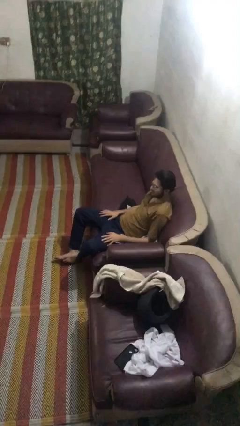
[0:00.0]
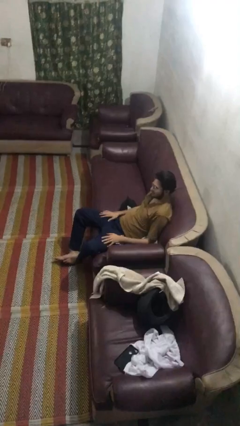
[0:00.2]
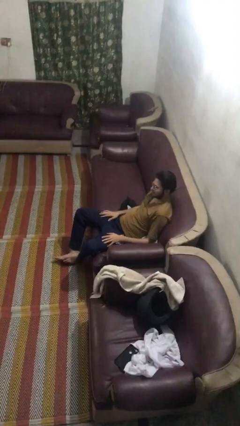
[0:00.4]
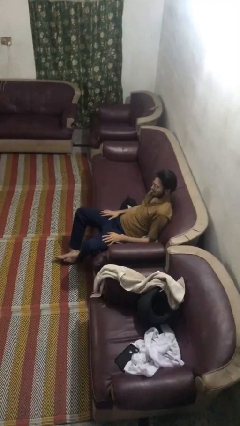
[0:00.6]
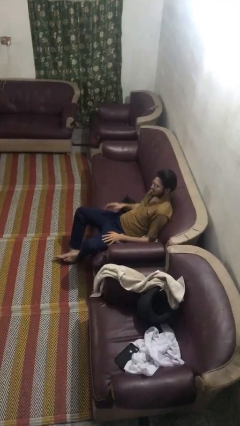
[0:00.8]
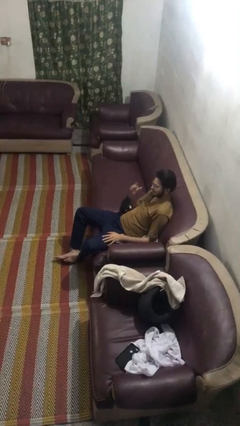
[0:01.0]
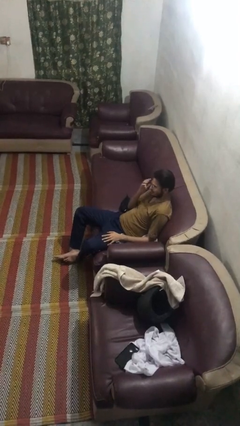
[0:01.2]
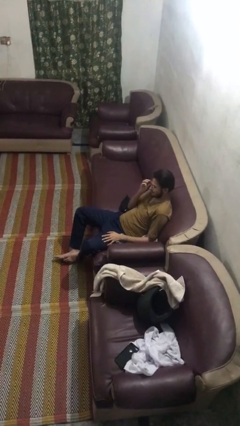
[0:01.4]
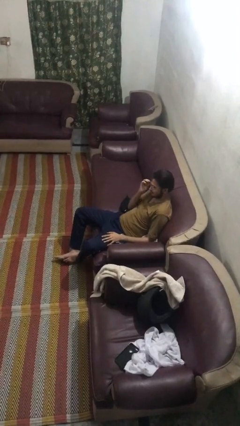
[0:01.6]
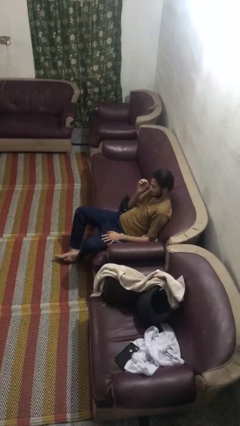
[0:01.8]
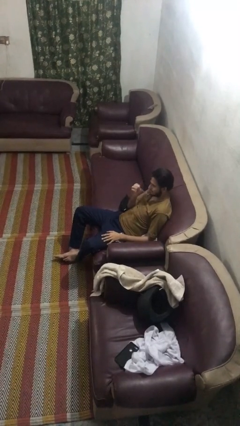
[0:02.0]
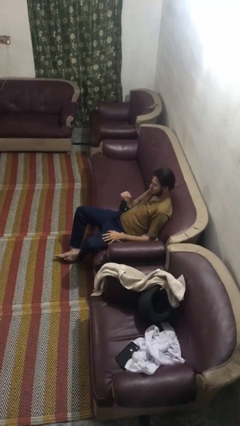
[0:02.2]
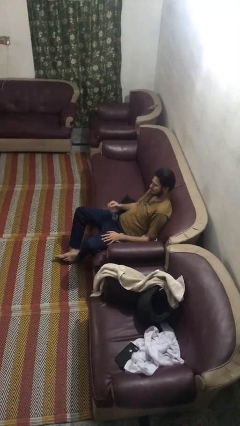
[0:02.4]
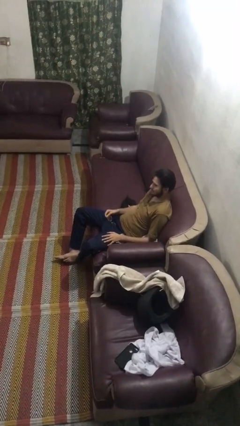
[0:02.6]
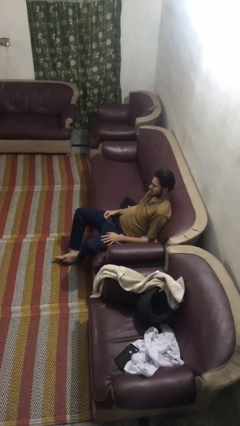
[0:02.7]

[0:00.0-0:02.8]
person takes off glasses

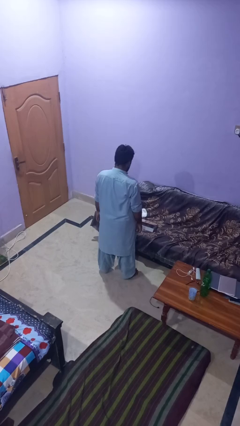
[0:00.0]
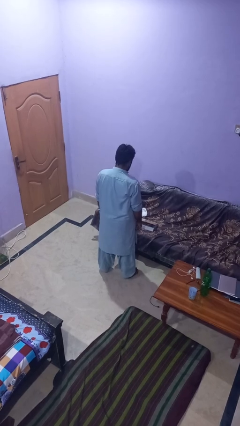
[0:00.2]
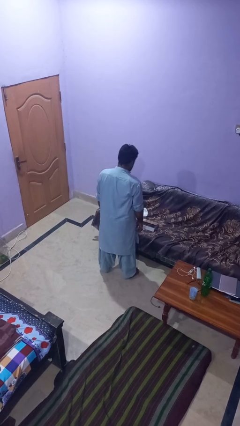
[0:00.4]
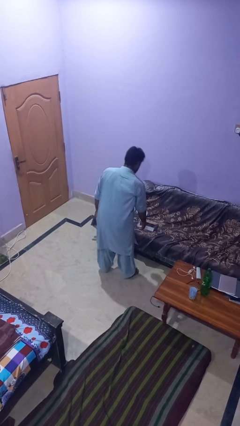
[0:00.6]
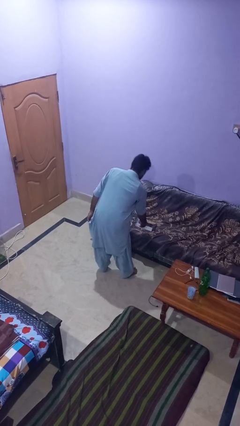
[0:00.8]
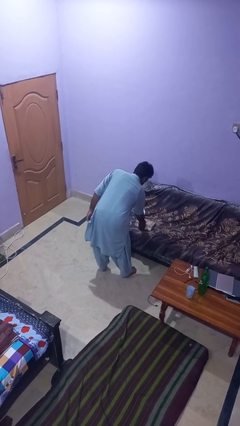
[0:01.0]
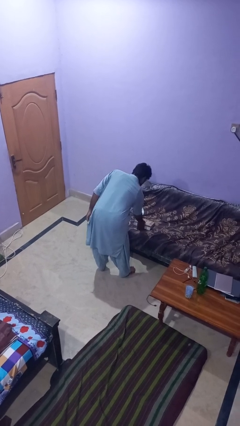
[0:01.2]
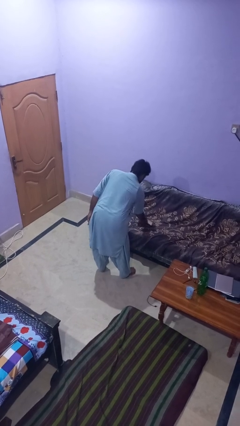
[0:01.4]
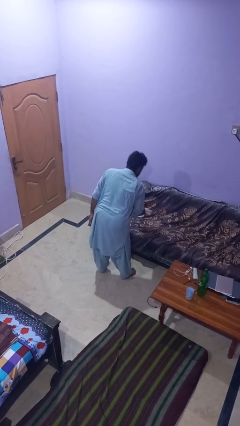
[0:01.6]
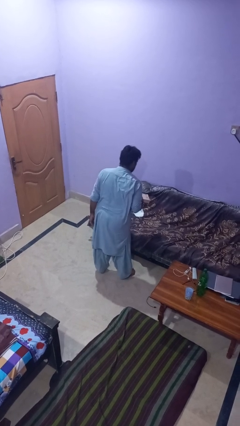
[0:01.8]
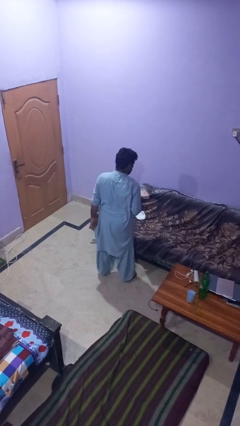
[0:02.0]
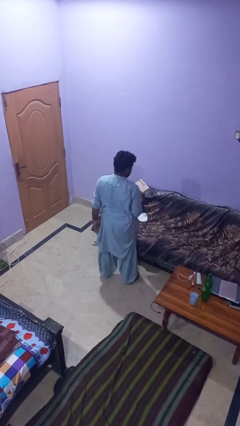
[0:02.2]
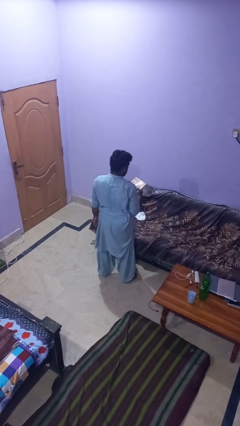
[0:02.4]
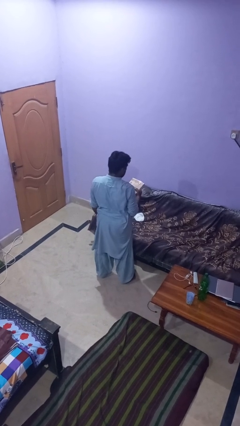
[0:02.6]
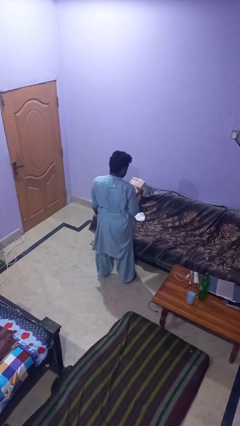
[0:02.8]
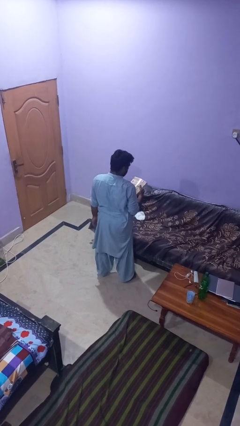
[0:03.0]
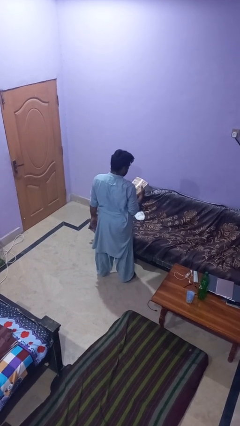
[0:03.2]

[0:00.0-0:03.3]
person picks up object from couch

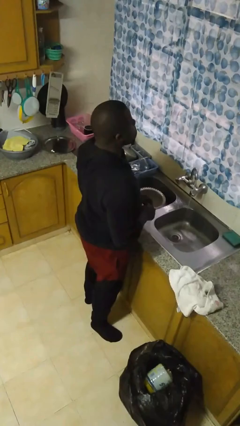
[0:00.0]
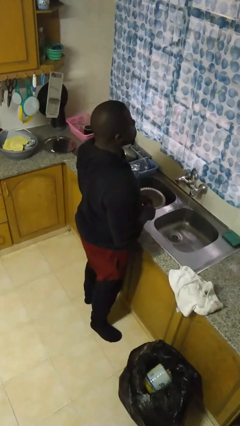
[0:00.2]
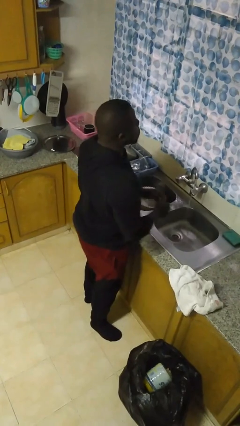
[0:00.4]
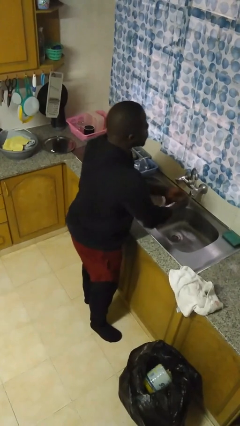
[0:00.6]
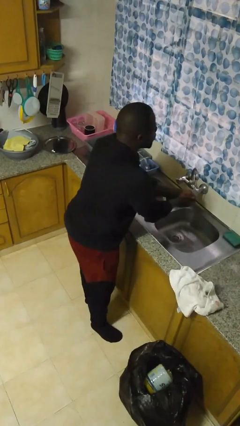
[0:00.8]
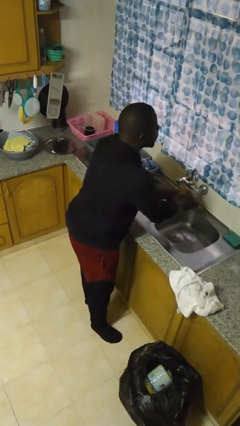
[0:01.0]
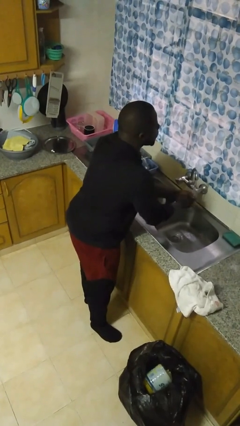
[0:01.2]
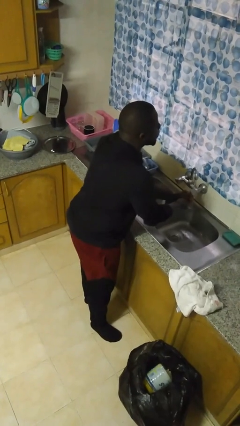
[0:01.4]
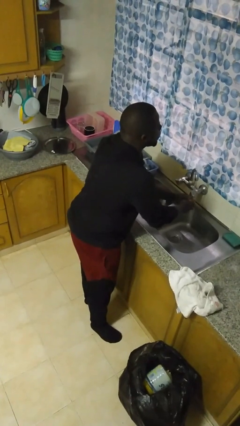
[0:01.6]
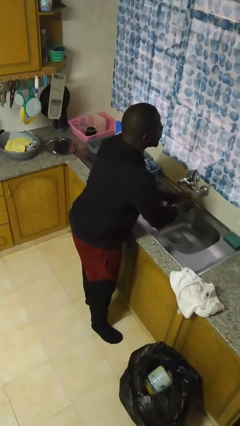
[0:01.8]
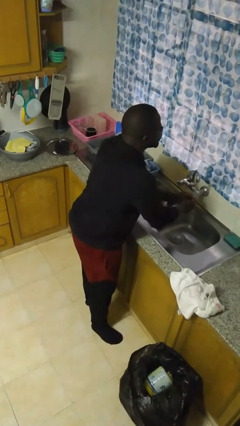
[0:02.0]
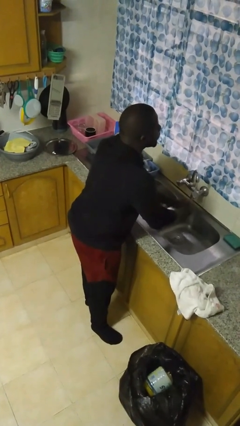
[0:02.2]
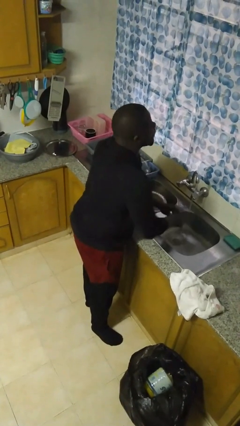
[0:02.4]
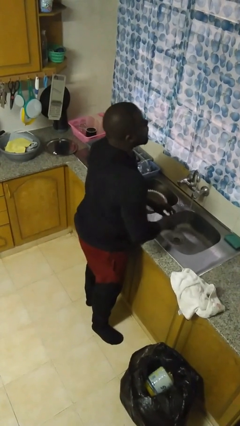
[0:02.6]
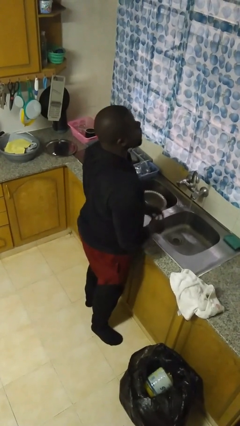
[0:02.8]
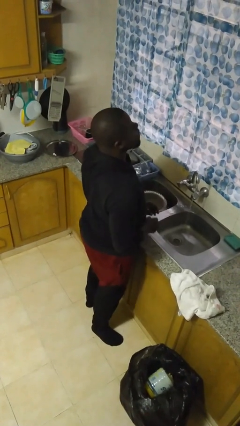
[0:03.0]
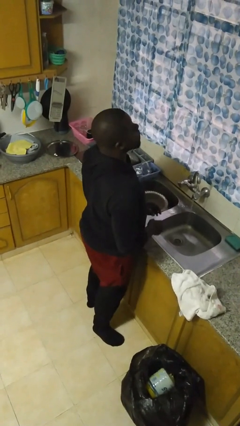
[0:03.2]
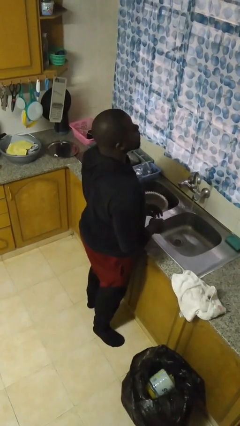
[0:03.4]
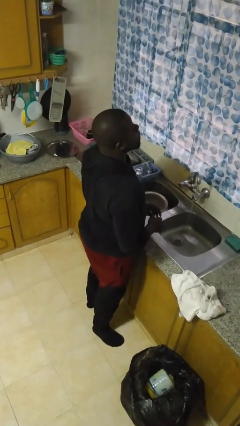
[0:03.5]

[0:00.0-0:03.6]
person washes hands

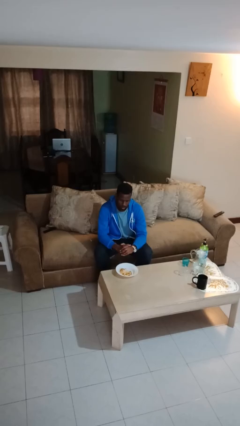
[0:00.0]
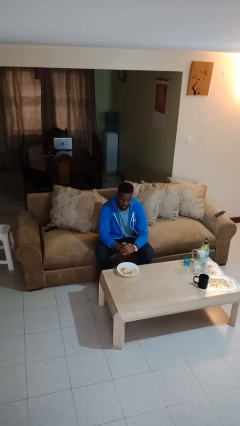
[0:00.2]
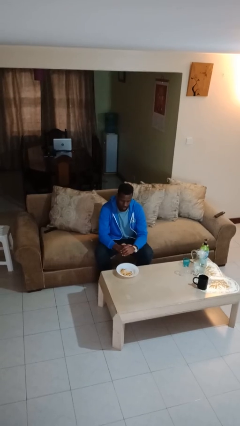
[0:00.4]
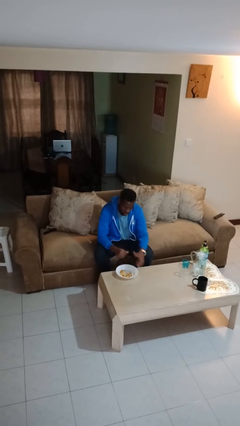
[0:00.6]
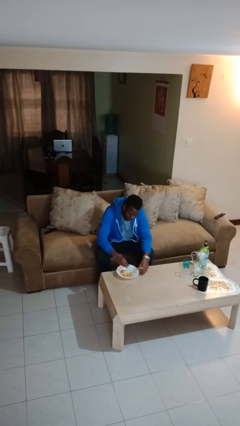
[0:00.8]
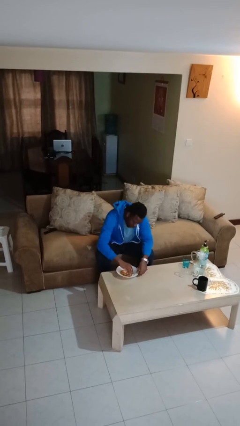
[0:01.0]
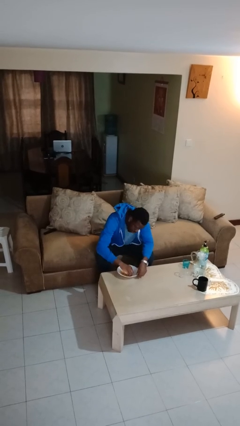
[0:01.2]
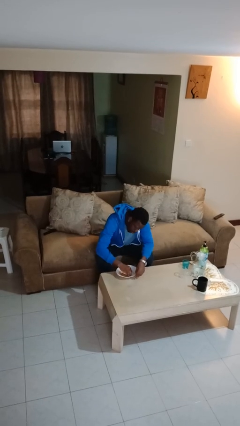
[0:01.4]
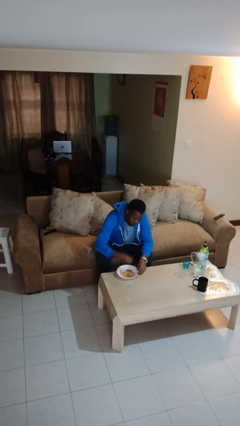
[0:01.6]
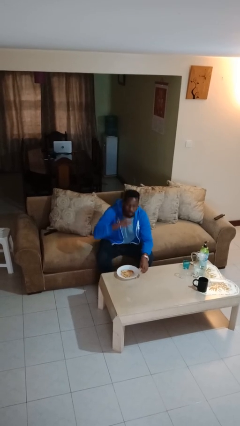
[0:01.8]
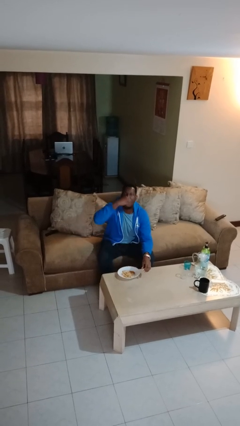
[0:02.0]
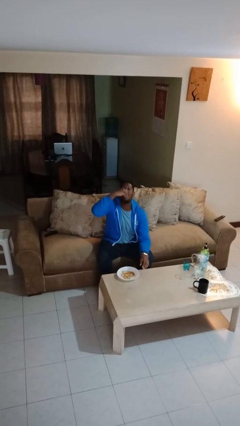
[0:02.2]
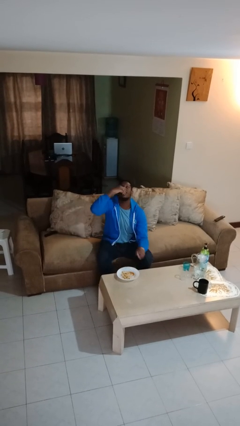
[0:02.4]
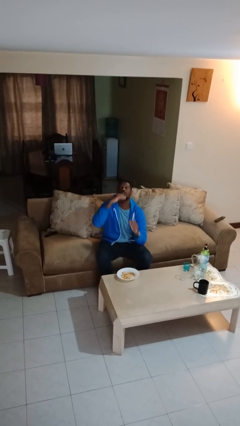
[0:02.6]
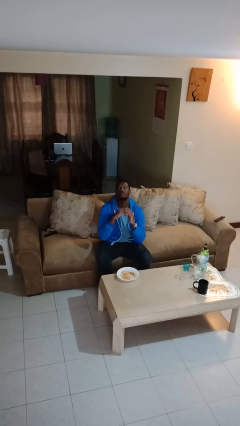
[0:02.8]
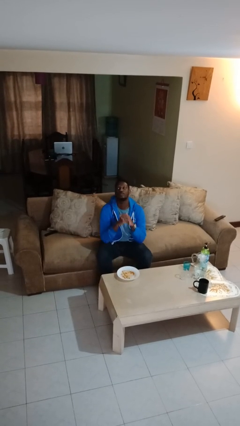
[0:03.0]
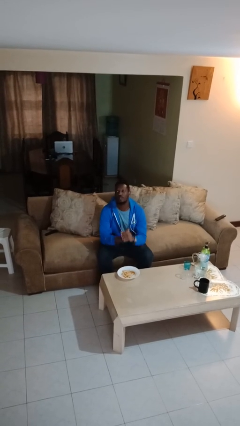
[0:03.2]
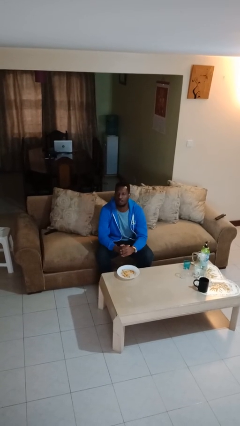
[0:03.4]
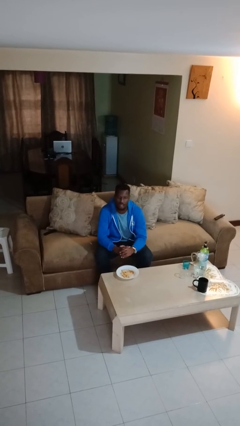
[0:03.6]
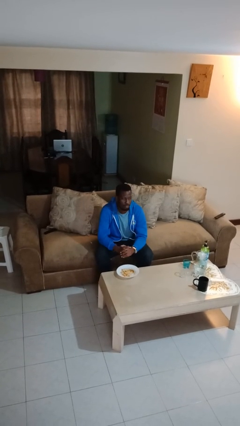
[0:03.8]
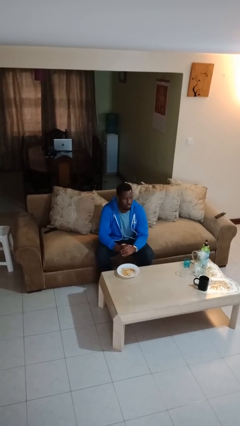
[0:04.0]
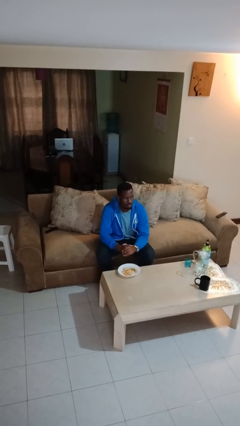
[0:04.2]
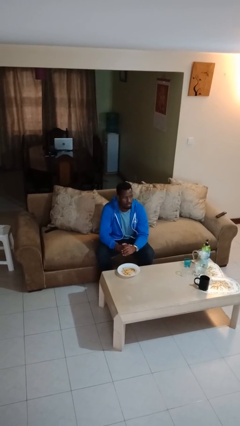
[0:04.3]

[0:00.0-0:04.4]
person eats with hands

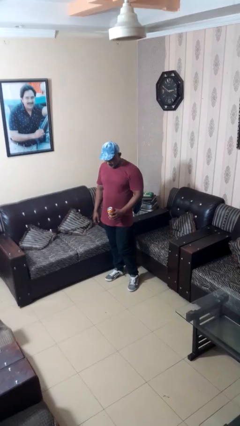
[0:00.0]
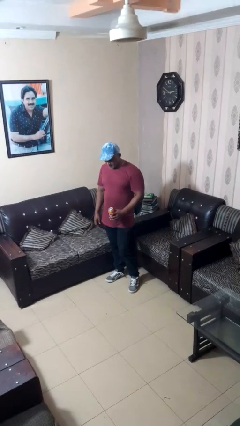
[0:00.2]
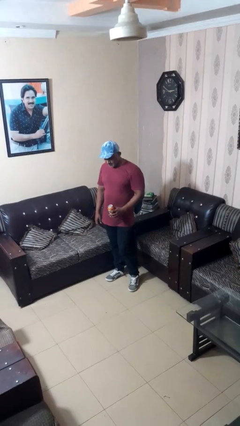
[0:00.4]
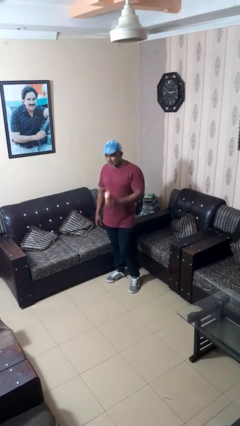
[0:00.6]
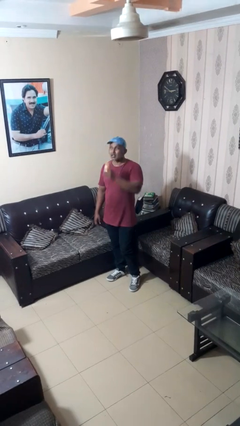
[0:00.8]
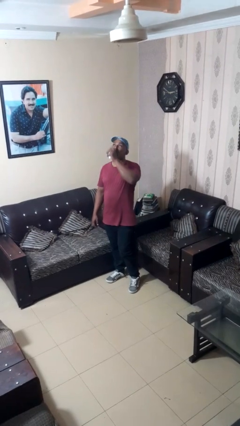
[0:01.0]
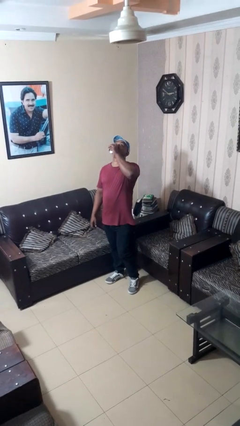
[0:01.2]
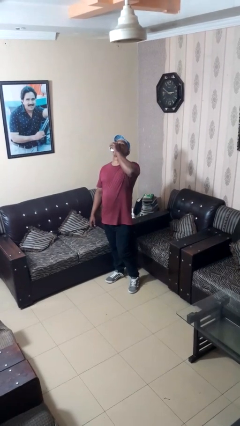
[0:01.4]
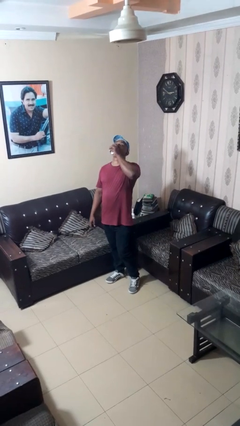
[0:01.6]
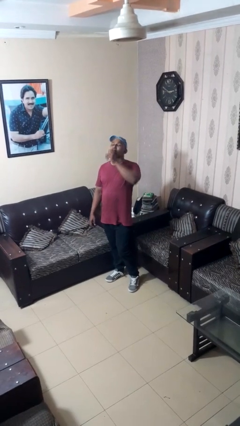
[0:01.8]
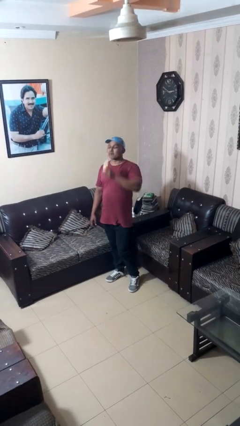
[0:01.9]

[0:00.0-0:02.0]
person drinks from beverage can

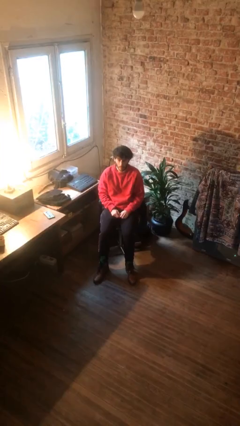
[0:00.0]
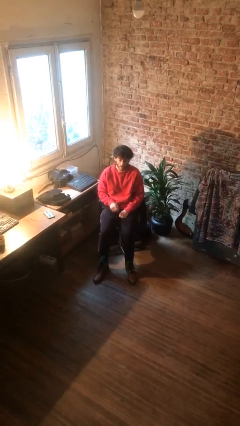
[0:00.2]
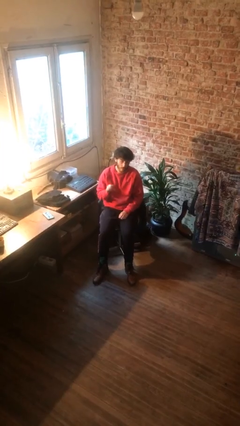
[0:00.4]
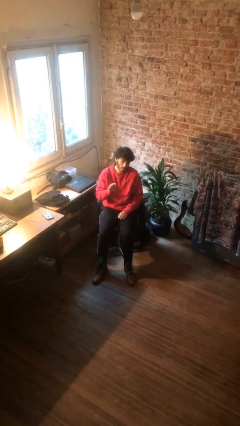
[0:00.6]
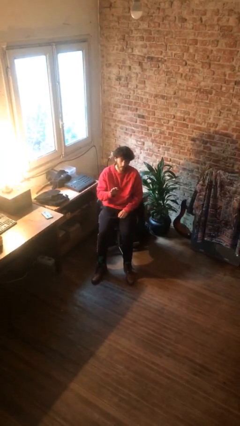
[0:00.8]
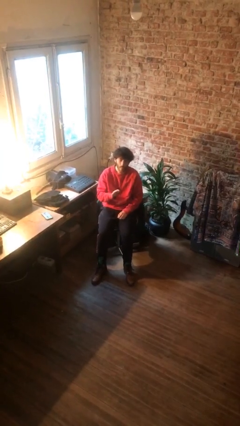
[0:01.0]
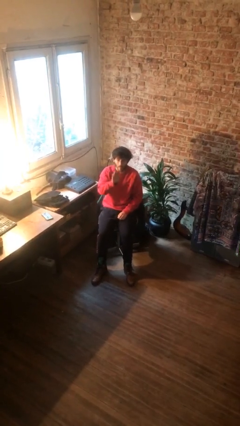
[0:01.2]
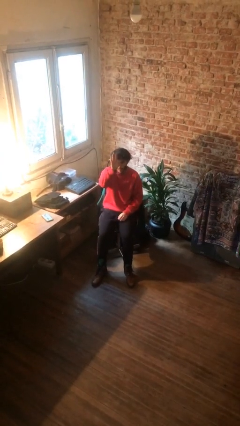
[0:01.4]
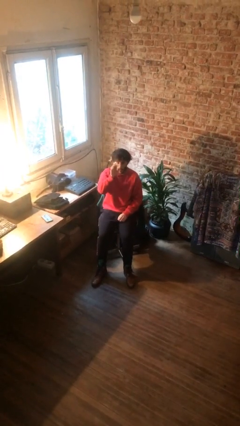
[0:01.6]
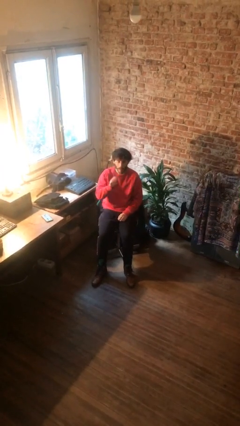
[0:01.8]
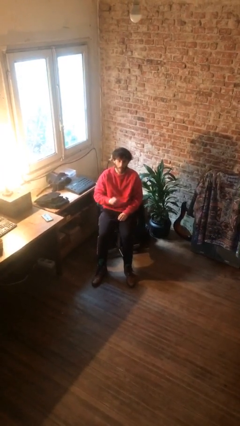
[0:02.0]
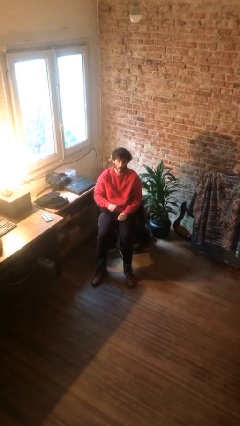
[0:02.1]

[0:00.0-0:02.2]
person gestures swipe up
